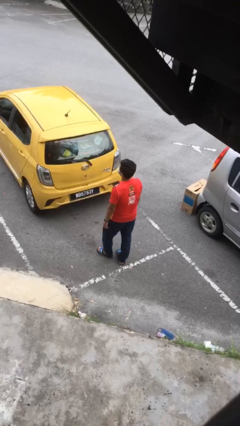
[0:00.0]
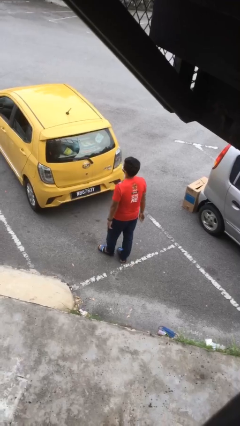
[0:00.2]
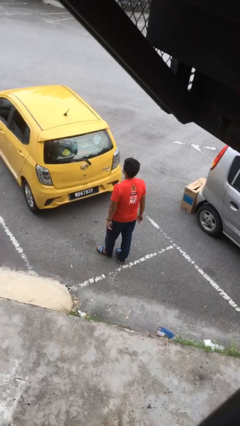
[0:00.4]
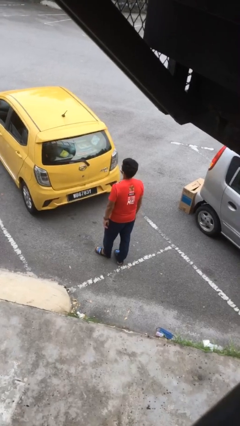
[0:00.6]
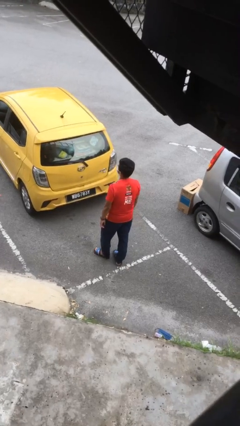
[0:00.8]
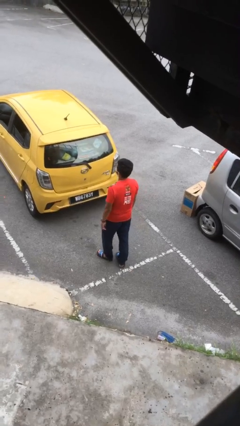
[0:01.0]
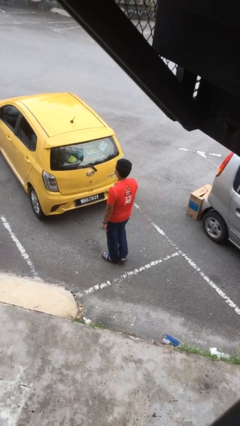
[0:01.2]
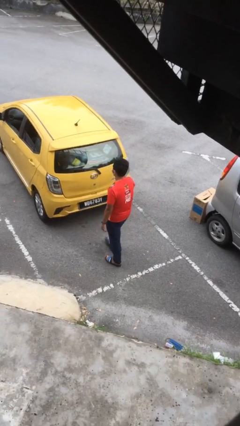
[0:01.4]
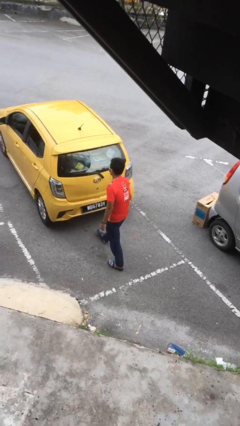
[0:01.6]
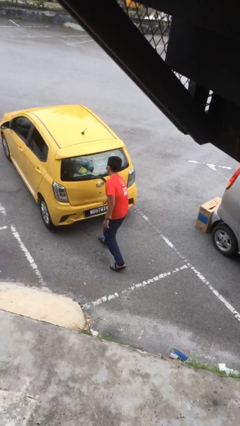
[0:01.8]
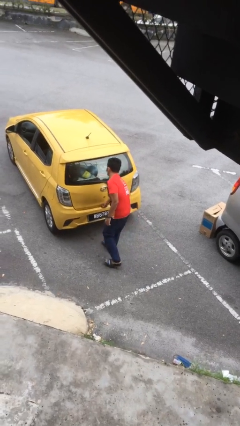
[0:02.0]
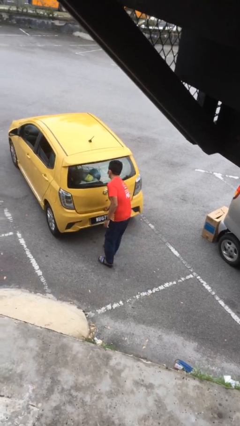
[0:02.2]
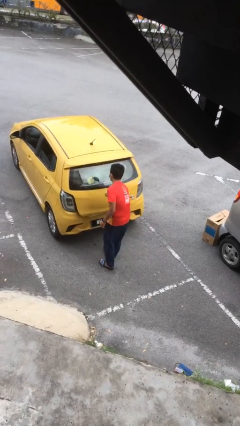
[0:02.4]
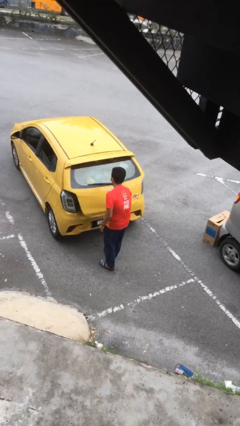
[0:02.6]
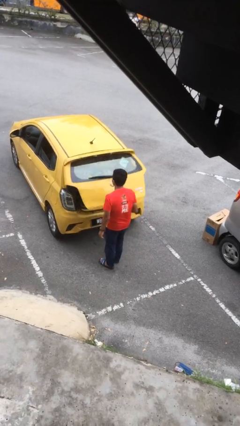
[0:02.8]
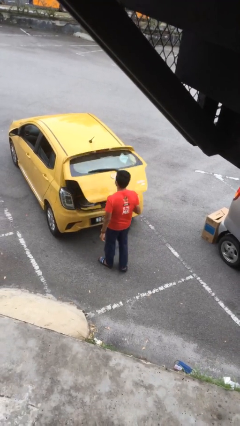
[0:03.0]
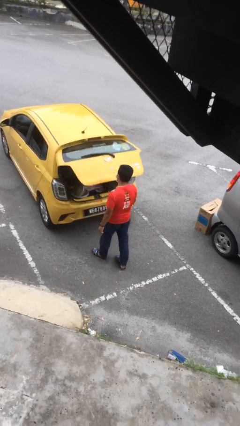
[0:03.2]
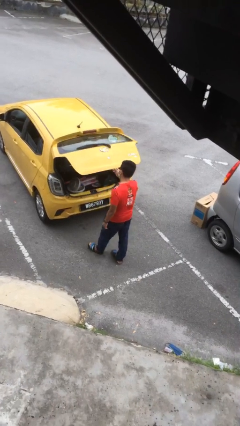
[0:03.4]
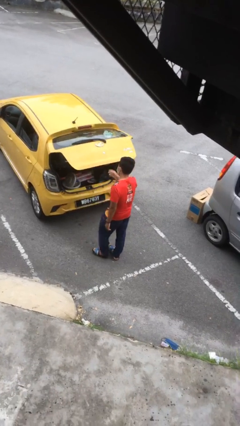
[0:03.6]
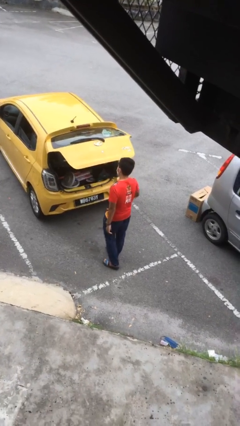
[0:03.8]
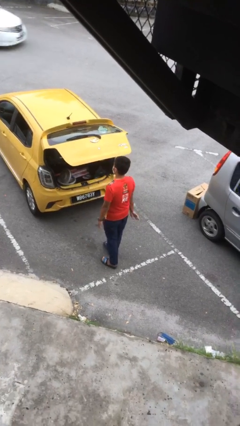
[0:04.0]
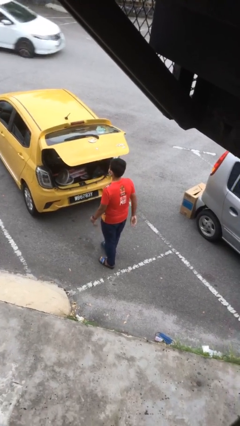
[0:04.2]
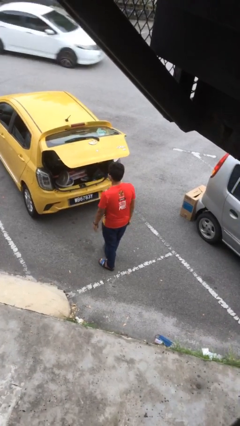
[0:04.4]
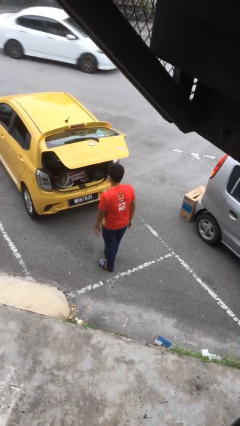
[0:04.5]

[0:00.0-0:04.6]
person opens car trunk

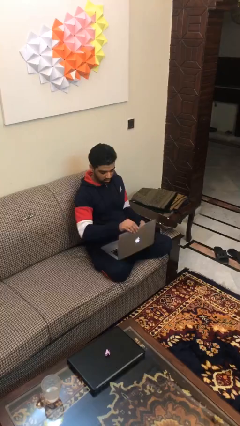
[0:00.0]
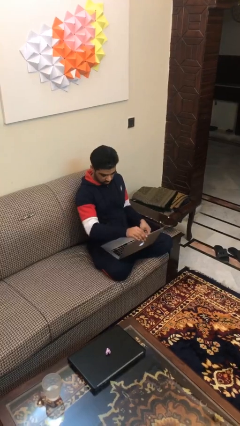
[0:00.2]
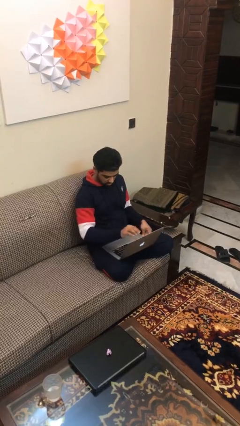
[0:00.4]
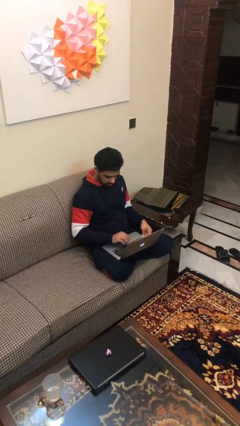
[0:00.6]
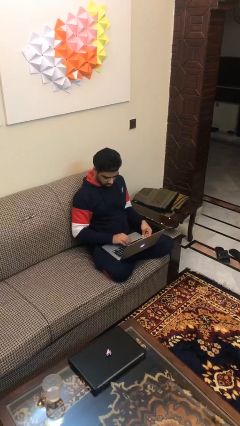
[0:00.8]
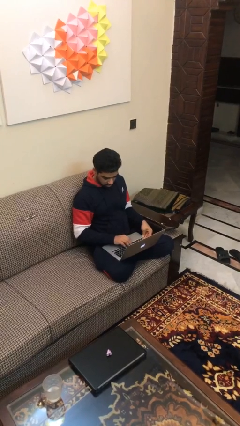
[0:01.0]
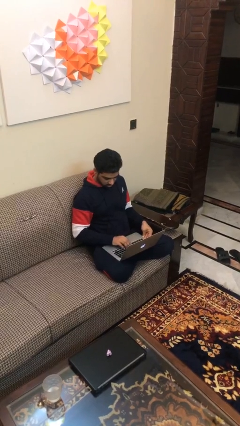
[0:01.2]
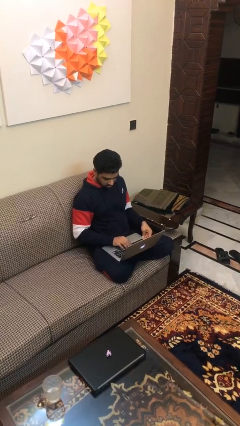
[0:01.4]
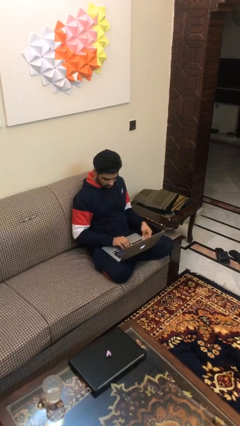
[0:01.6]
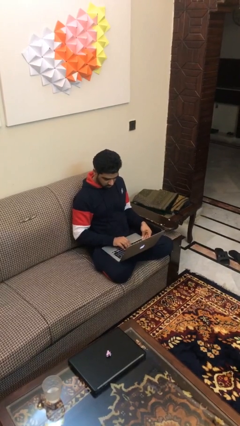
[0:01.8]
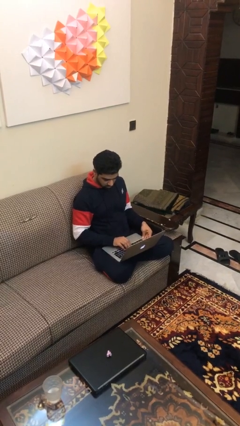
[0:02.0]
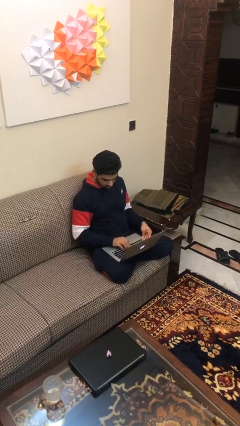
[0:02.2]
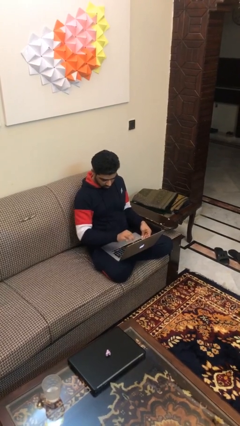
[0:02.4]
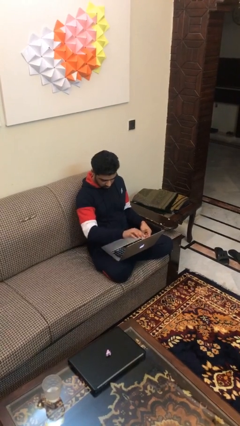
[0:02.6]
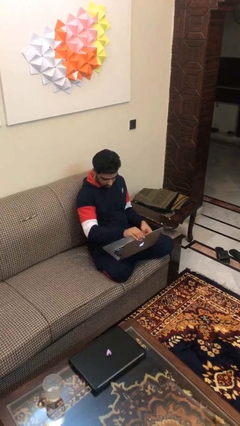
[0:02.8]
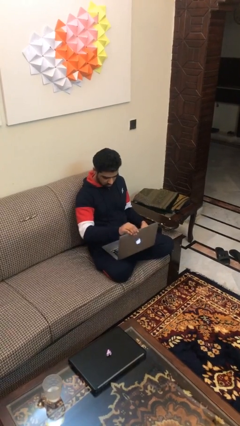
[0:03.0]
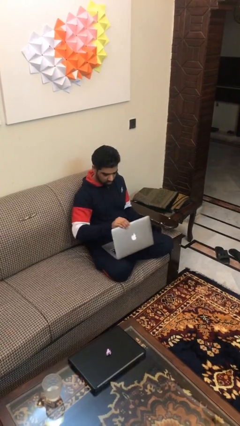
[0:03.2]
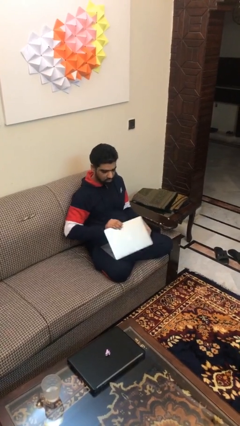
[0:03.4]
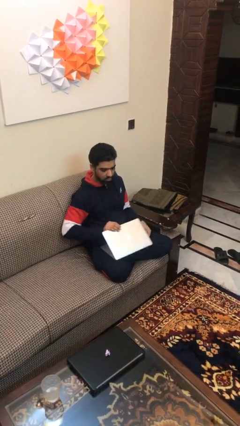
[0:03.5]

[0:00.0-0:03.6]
person interacts with laptop

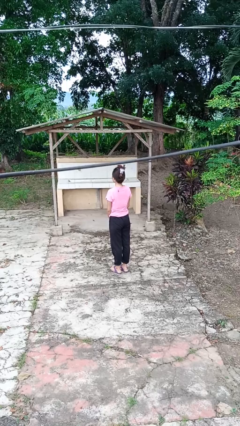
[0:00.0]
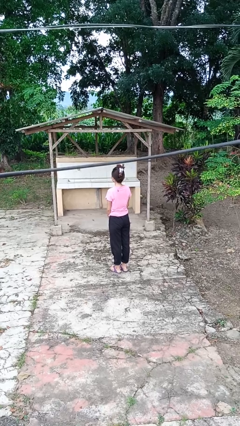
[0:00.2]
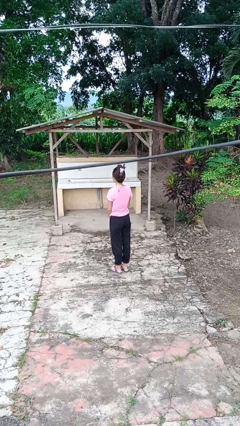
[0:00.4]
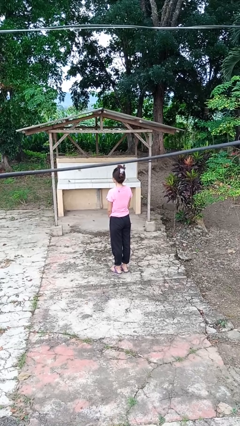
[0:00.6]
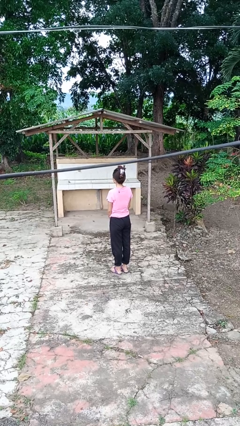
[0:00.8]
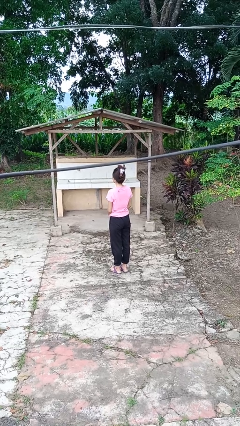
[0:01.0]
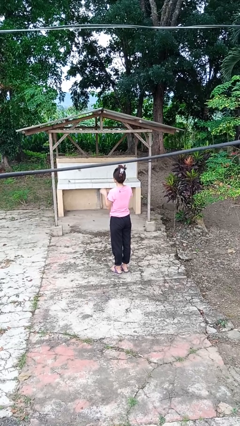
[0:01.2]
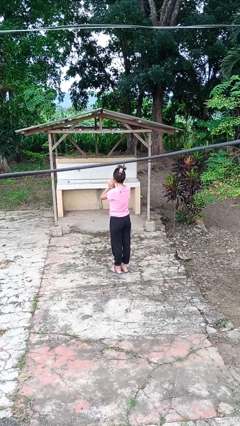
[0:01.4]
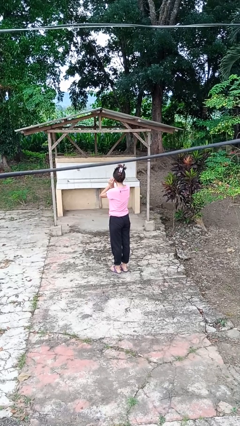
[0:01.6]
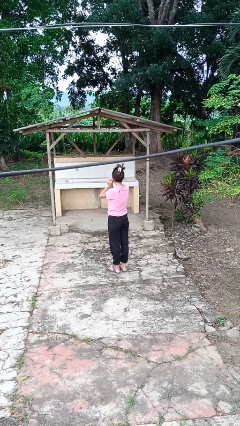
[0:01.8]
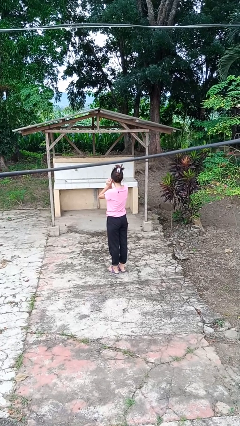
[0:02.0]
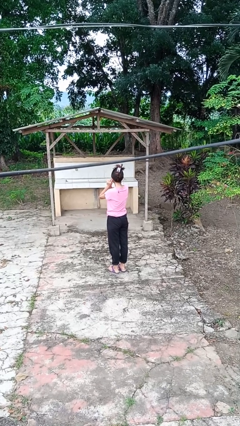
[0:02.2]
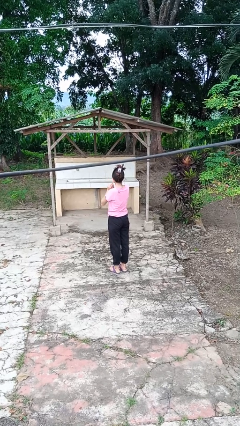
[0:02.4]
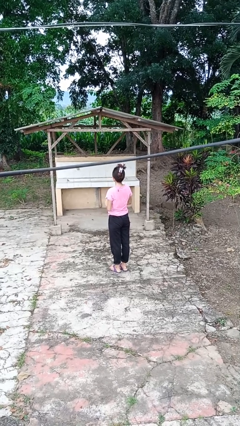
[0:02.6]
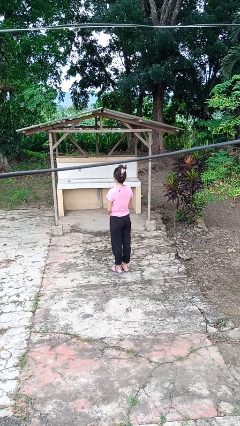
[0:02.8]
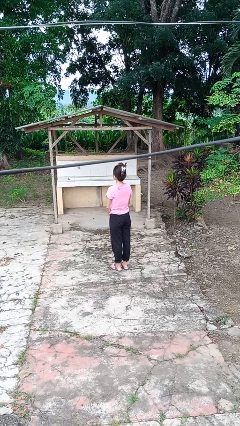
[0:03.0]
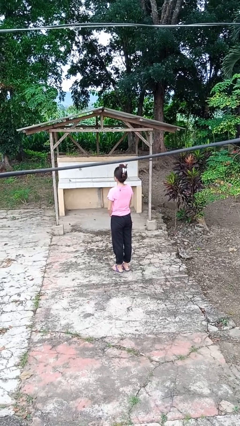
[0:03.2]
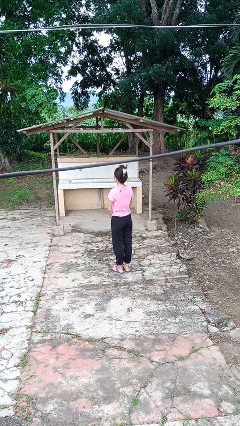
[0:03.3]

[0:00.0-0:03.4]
person takes off earrings

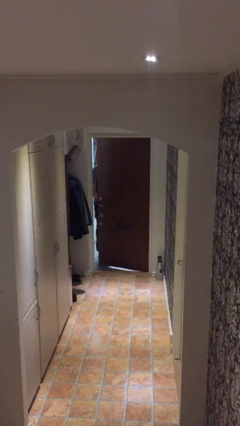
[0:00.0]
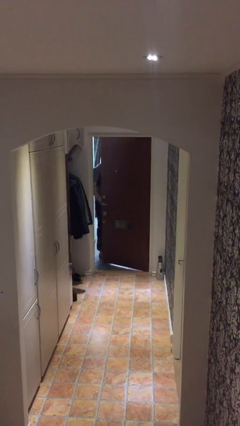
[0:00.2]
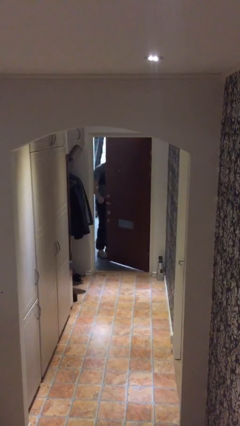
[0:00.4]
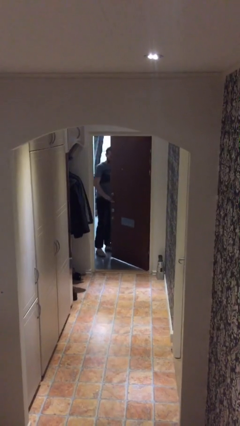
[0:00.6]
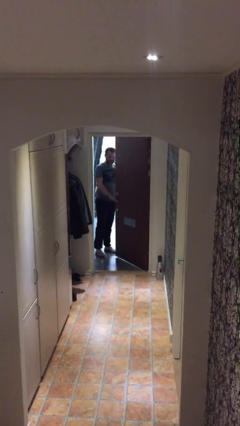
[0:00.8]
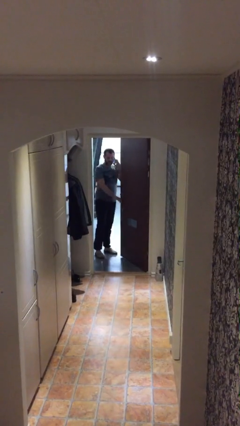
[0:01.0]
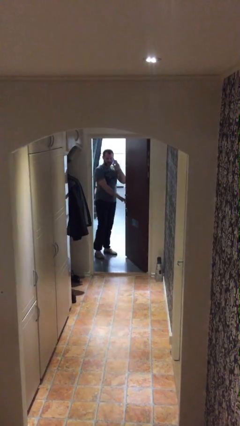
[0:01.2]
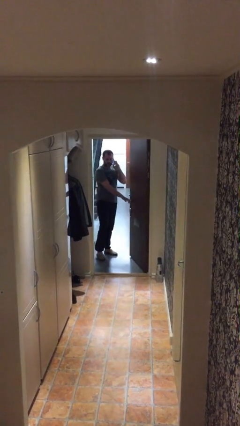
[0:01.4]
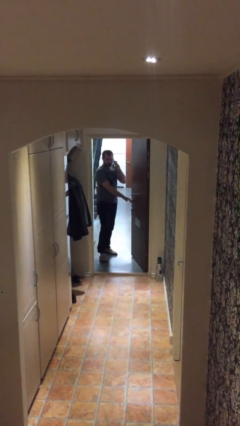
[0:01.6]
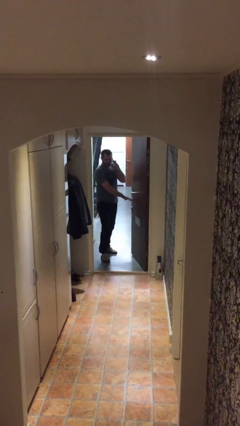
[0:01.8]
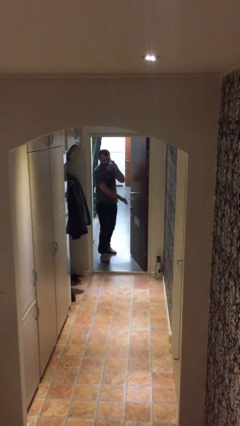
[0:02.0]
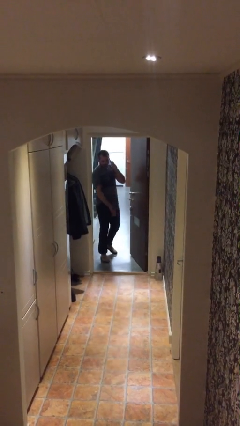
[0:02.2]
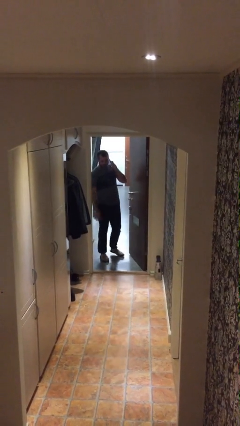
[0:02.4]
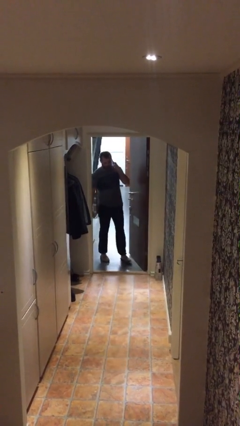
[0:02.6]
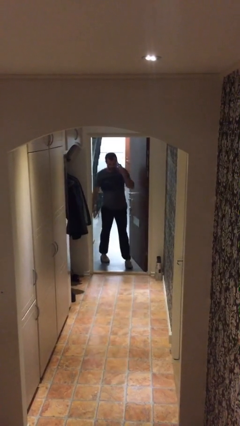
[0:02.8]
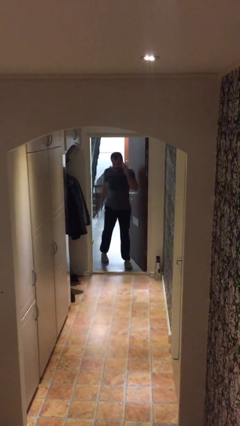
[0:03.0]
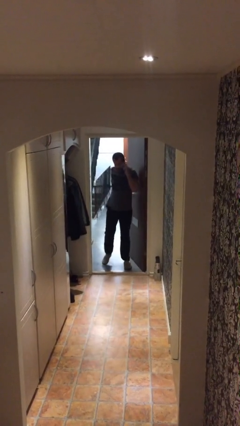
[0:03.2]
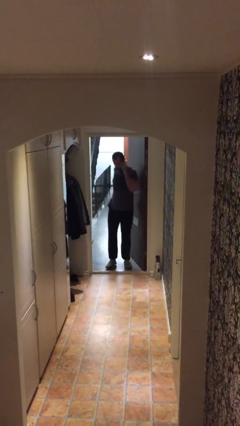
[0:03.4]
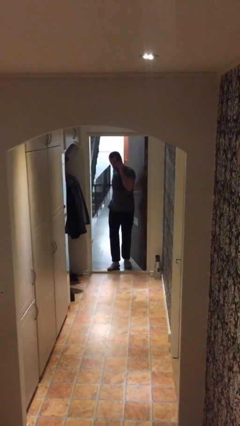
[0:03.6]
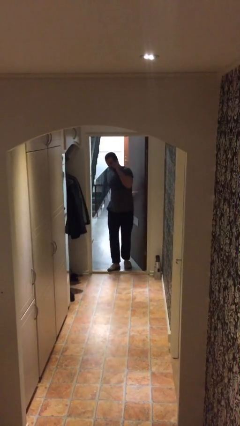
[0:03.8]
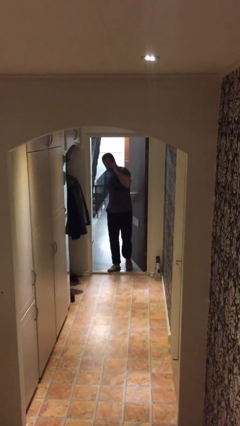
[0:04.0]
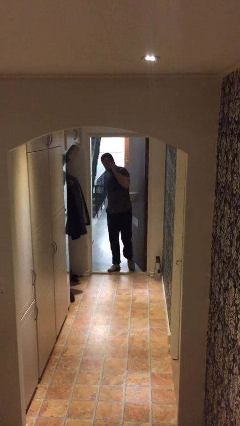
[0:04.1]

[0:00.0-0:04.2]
person opens facility door

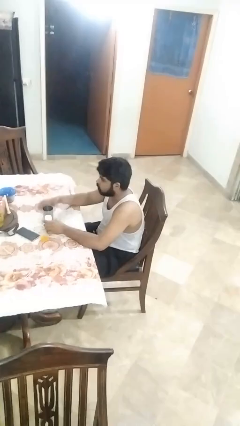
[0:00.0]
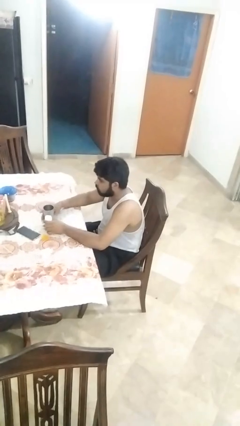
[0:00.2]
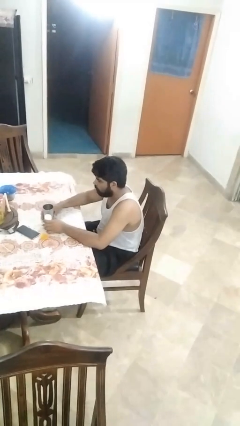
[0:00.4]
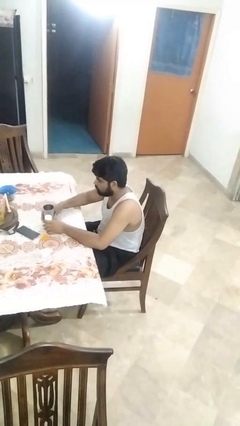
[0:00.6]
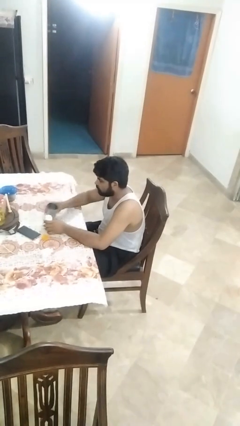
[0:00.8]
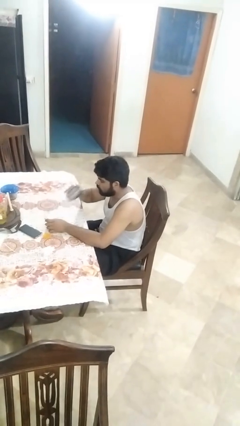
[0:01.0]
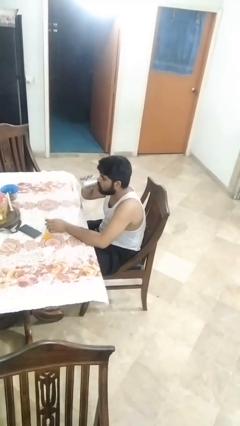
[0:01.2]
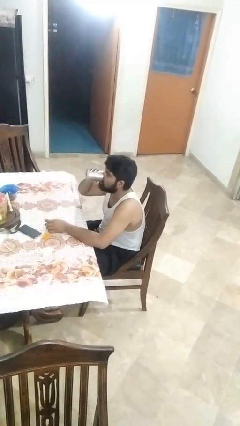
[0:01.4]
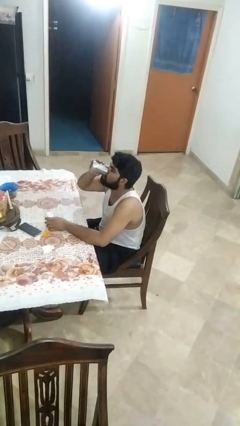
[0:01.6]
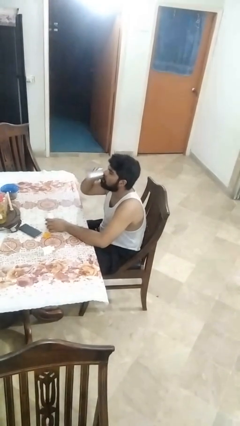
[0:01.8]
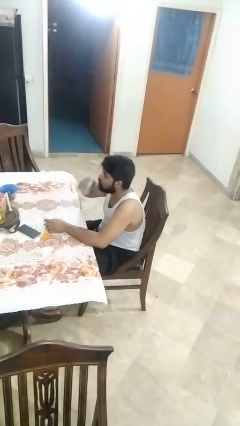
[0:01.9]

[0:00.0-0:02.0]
person drinks from cup
